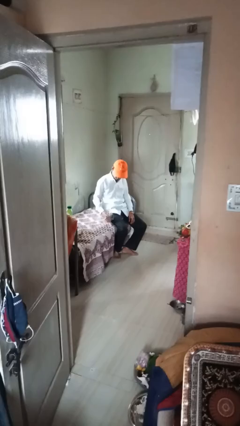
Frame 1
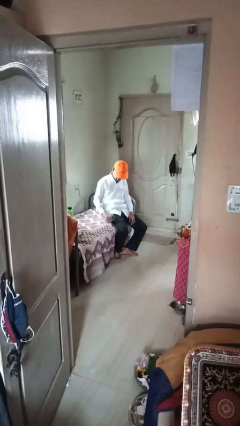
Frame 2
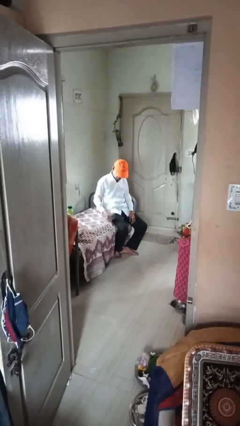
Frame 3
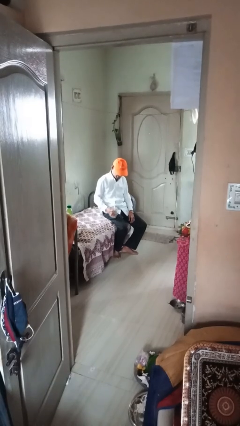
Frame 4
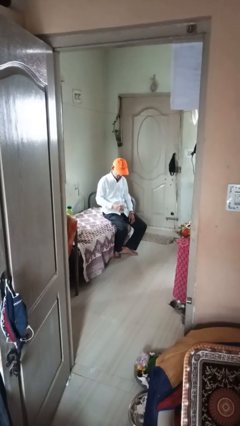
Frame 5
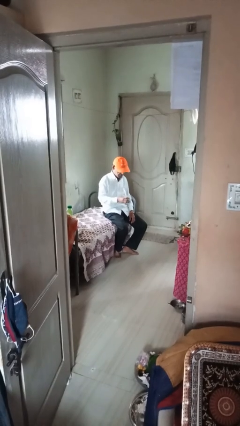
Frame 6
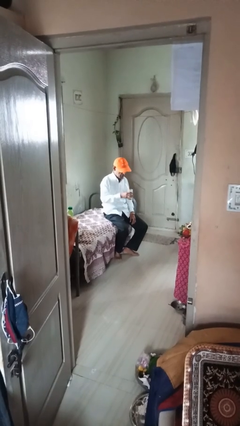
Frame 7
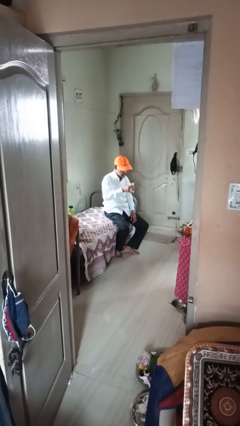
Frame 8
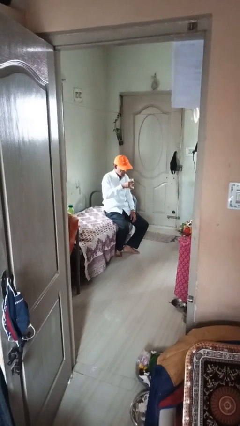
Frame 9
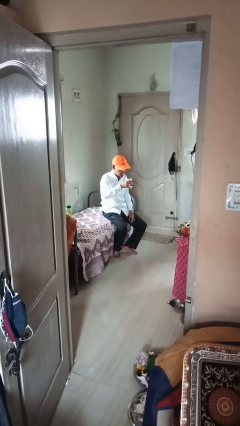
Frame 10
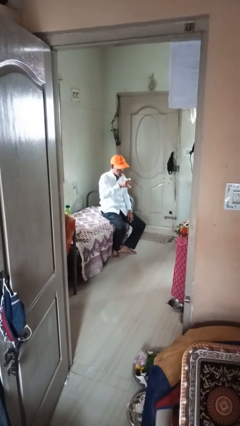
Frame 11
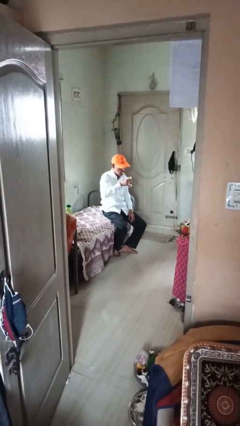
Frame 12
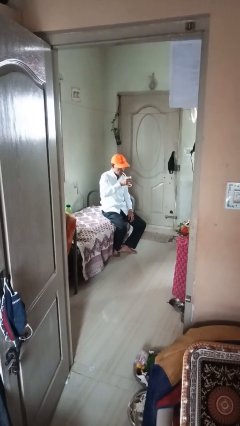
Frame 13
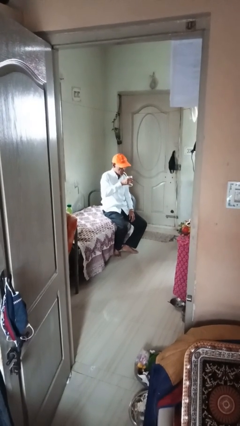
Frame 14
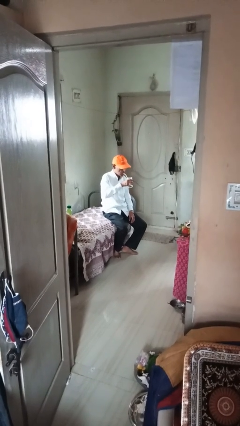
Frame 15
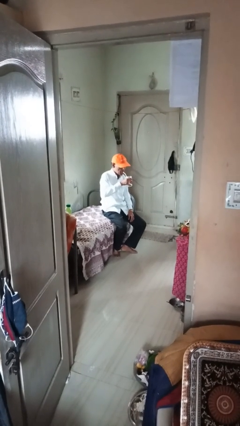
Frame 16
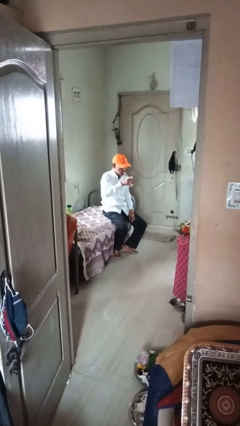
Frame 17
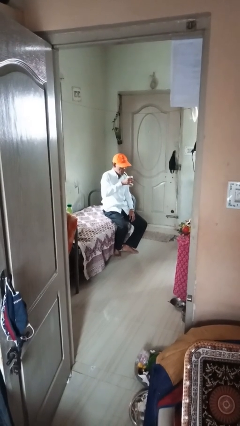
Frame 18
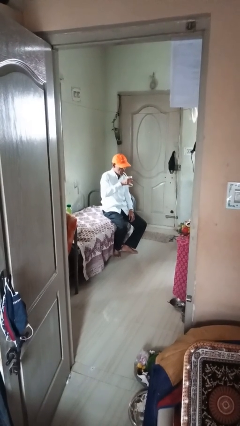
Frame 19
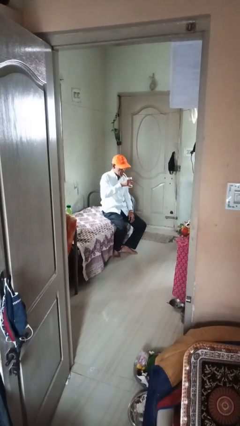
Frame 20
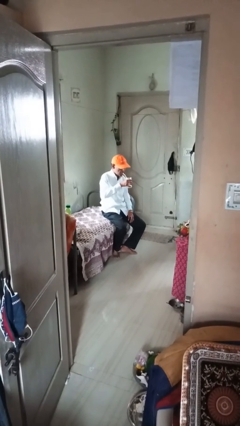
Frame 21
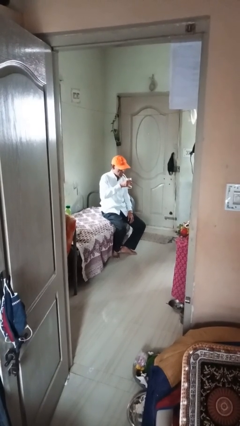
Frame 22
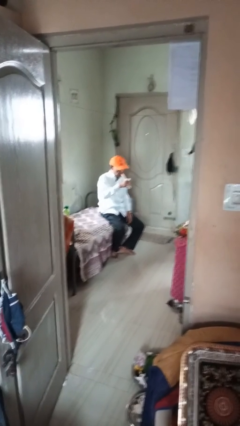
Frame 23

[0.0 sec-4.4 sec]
person drinks from straw

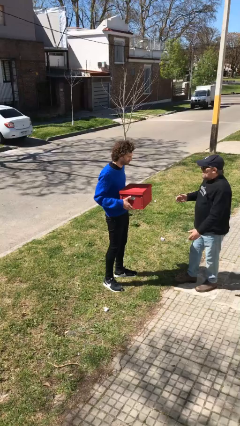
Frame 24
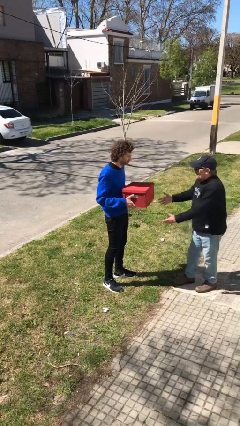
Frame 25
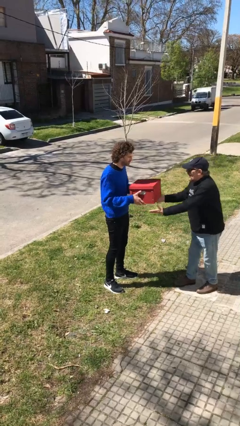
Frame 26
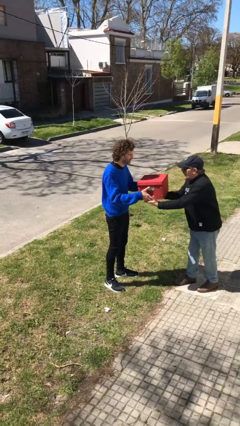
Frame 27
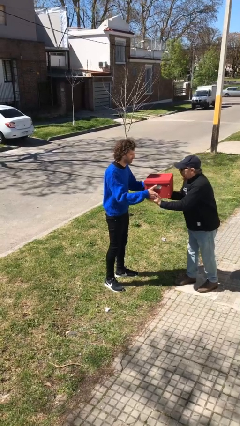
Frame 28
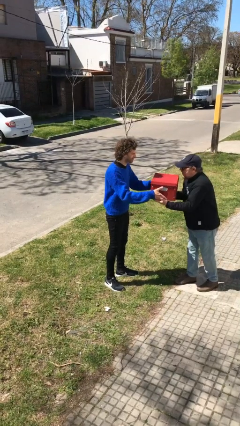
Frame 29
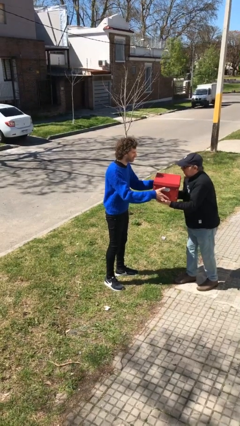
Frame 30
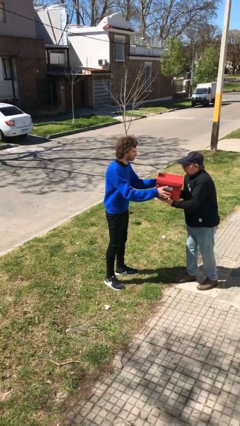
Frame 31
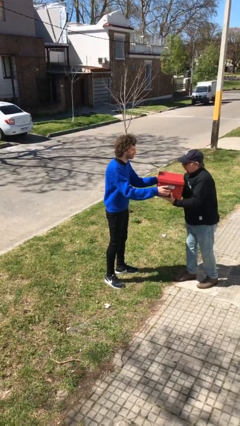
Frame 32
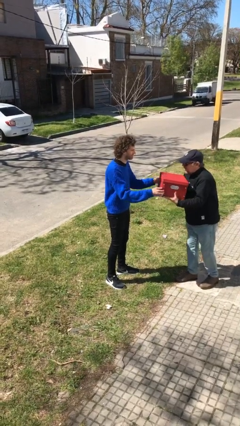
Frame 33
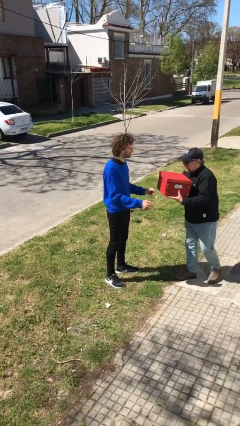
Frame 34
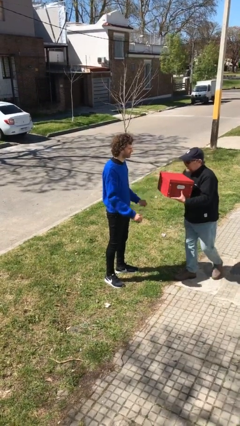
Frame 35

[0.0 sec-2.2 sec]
person transfers object to person

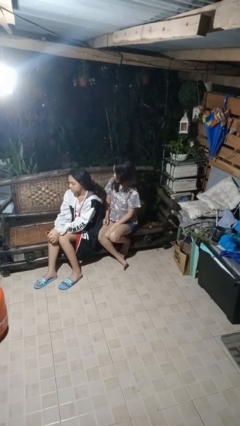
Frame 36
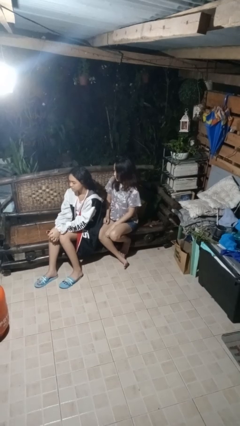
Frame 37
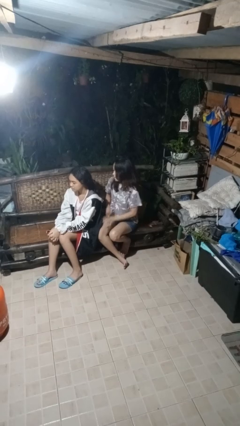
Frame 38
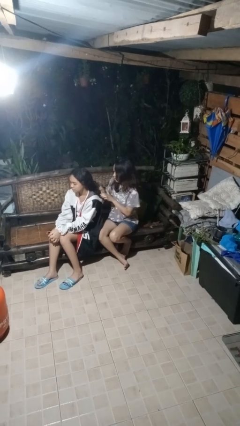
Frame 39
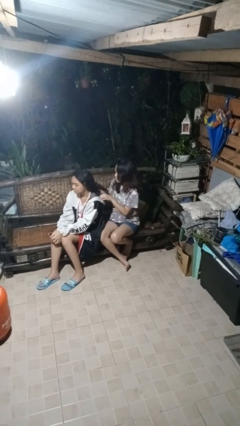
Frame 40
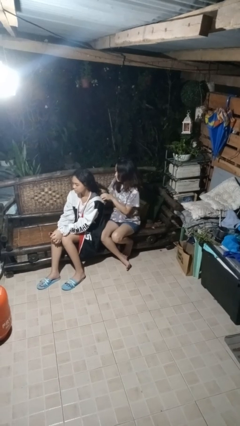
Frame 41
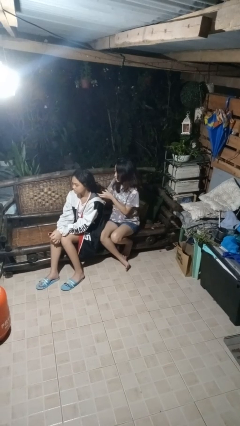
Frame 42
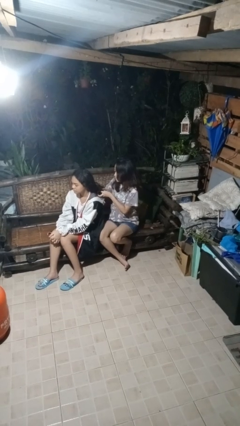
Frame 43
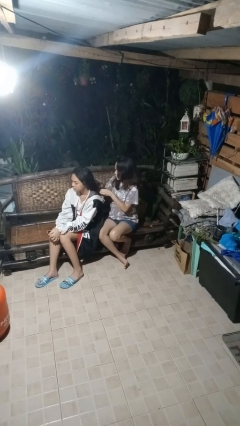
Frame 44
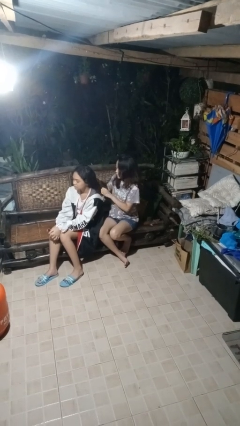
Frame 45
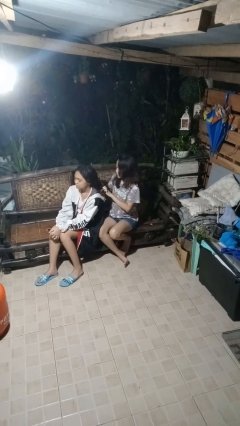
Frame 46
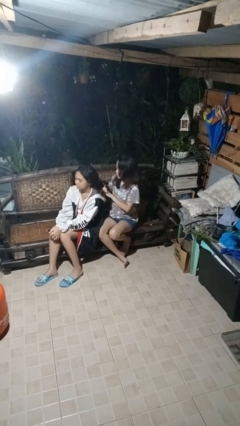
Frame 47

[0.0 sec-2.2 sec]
person braids hair of person

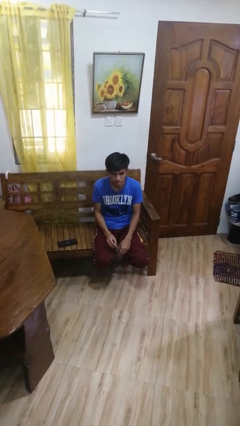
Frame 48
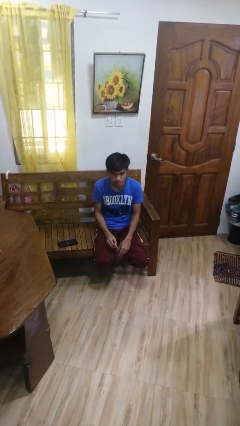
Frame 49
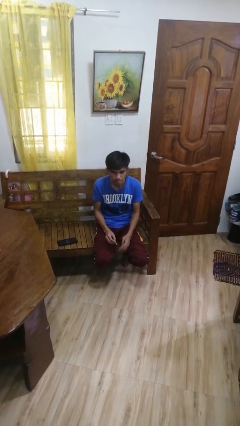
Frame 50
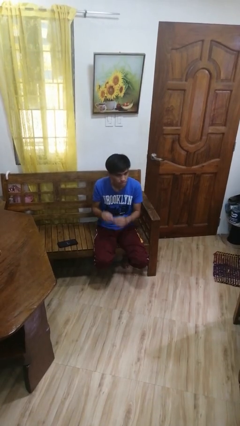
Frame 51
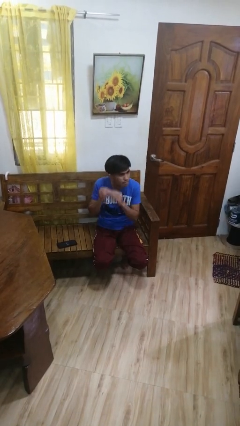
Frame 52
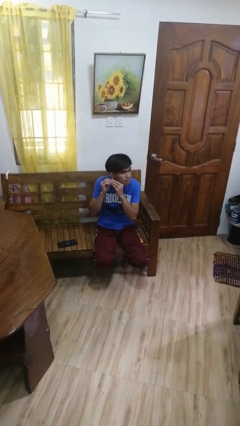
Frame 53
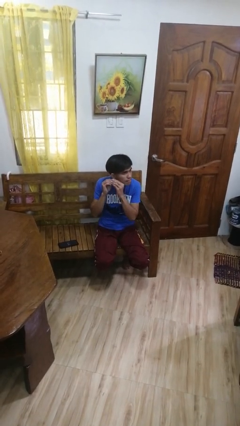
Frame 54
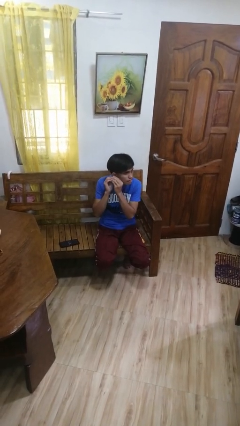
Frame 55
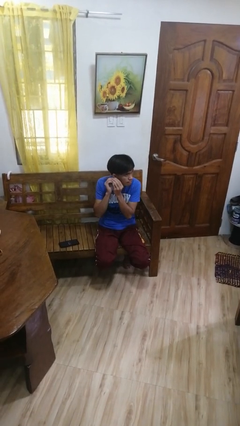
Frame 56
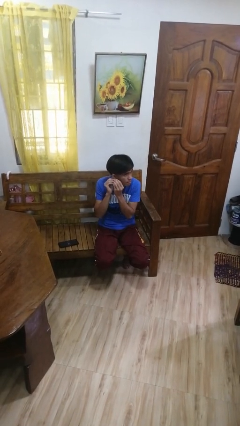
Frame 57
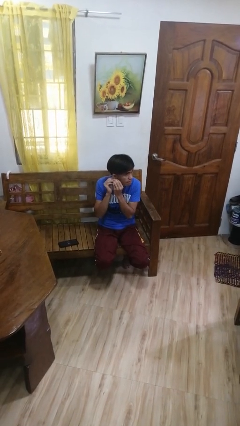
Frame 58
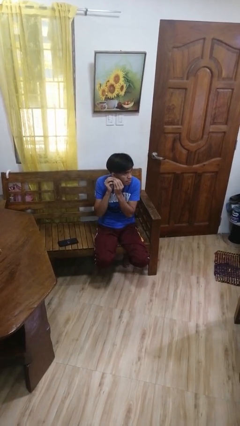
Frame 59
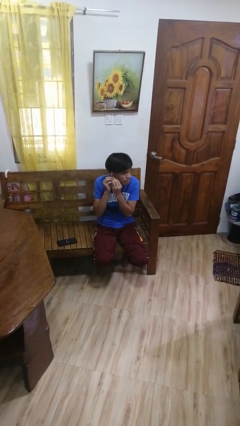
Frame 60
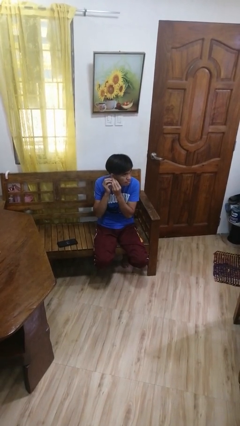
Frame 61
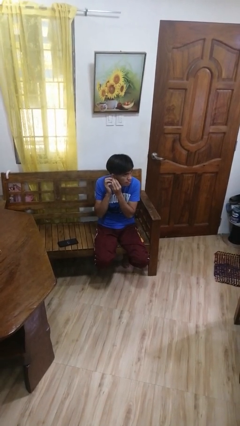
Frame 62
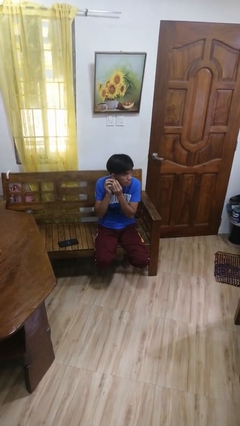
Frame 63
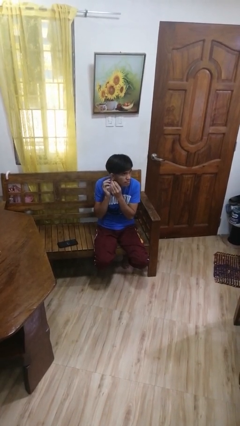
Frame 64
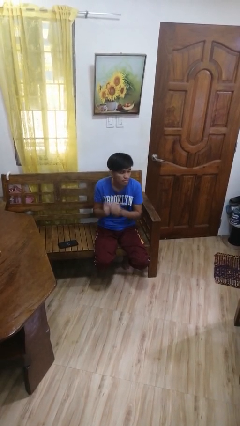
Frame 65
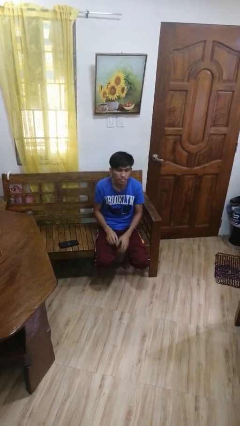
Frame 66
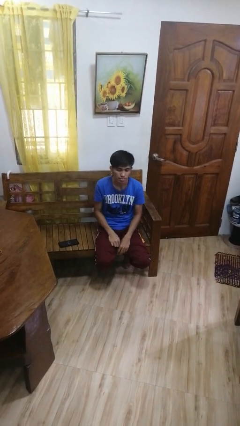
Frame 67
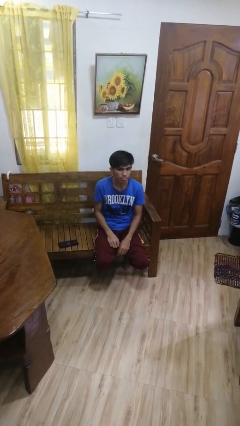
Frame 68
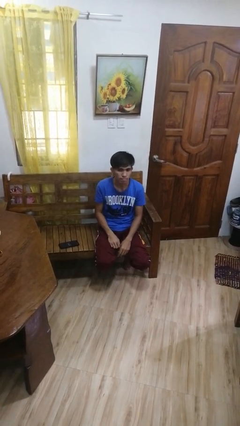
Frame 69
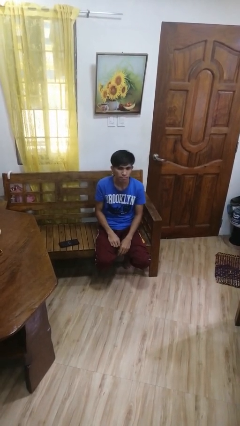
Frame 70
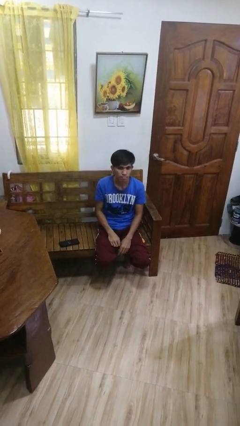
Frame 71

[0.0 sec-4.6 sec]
person puts on earrings

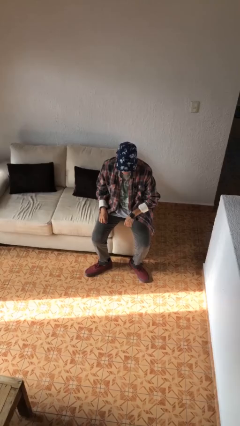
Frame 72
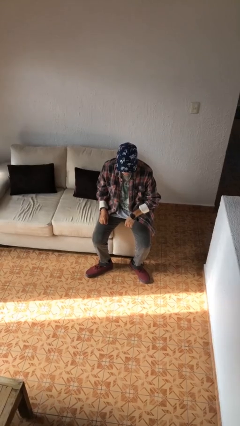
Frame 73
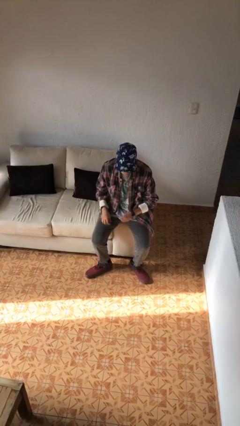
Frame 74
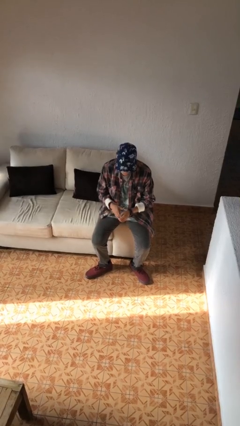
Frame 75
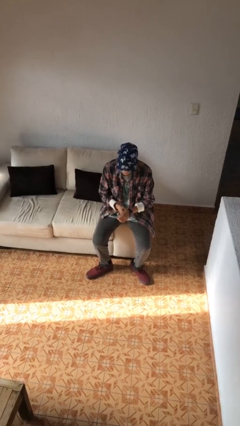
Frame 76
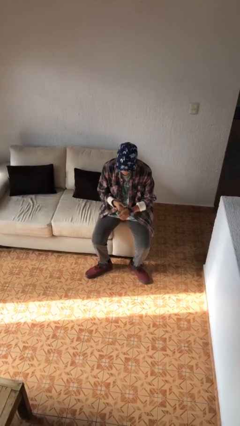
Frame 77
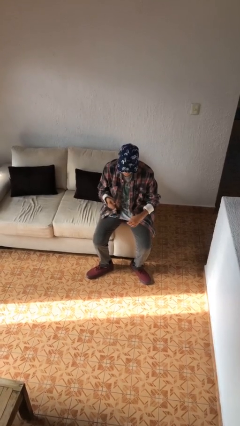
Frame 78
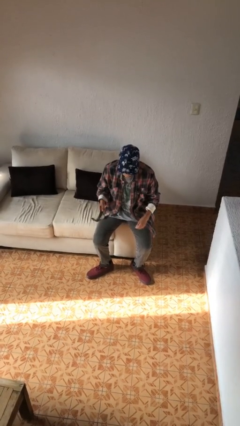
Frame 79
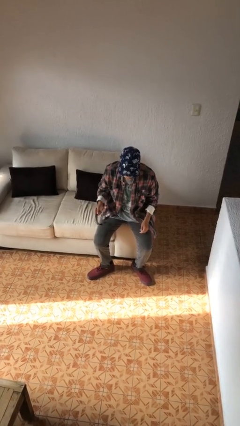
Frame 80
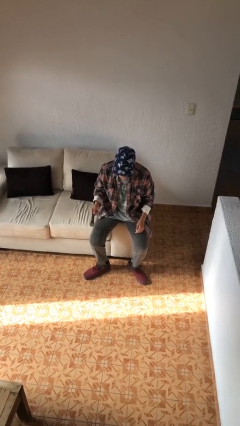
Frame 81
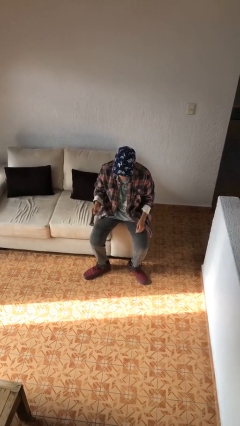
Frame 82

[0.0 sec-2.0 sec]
person takes off wristwatch

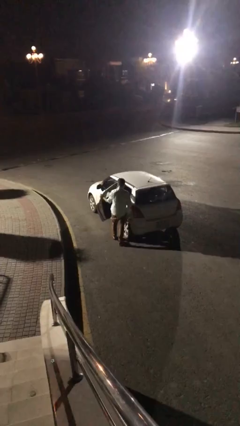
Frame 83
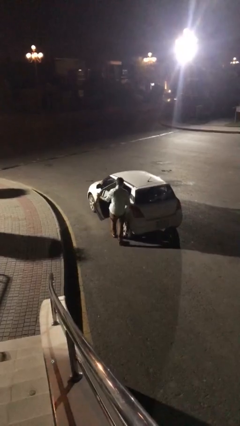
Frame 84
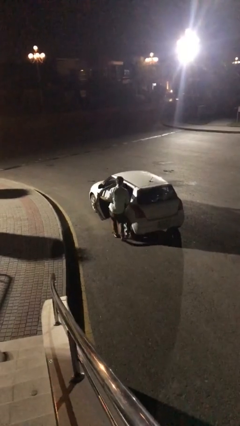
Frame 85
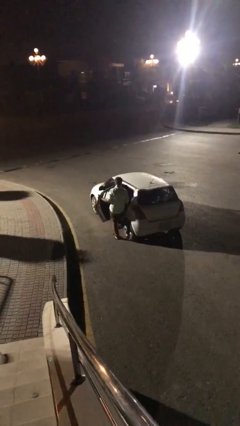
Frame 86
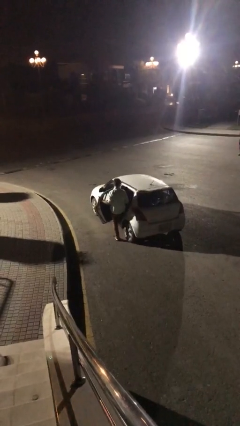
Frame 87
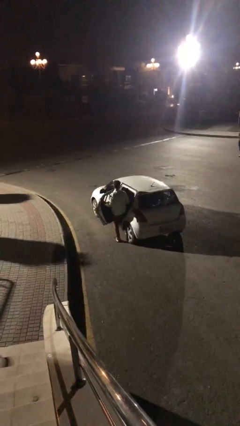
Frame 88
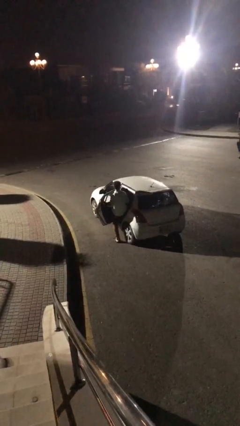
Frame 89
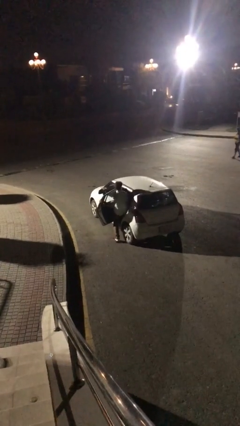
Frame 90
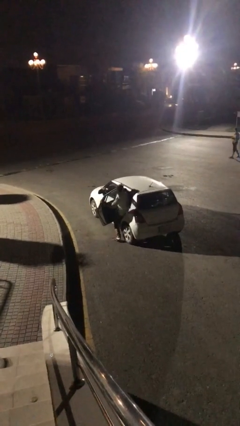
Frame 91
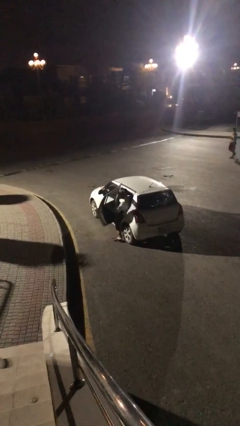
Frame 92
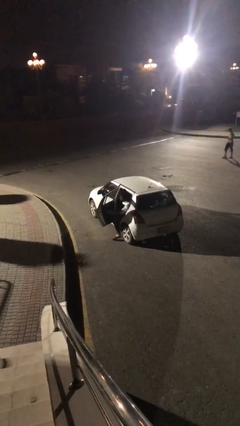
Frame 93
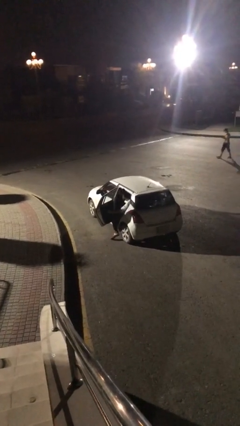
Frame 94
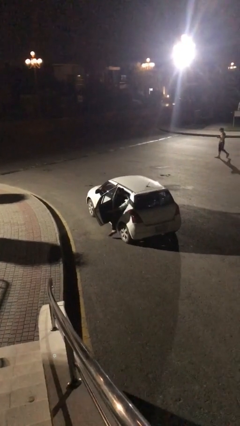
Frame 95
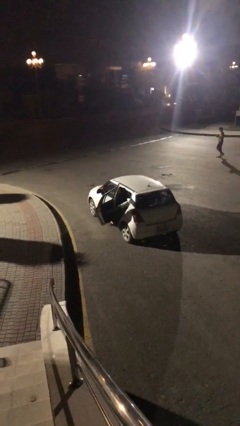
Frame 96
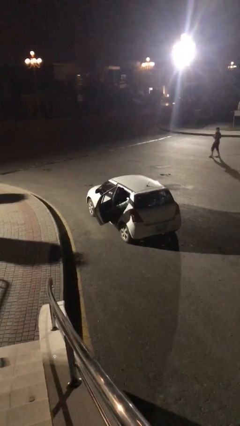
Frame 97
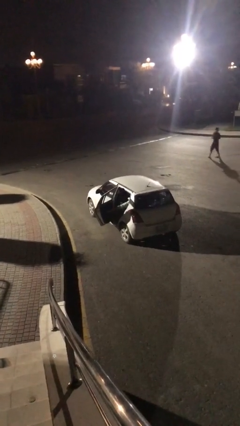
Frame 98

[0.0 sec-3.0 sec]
person enters car
